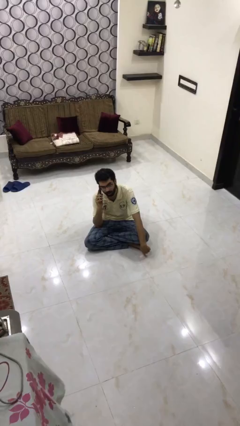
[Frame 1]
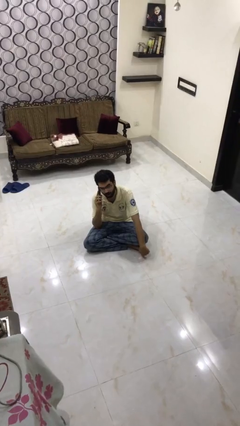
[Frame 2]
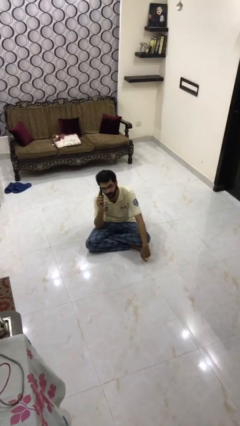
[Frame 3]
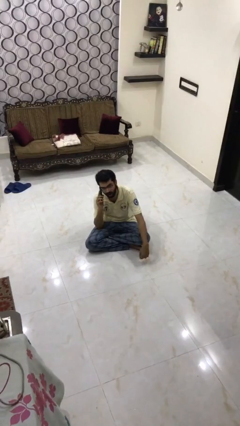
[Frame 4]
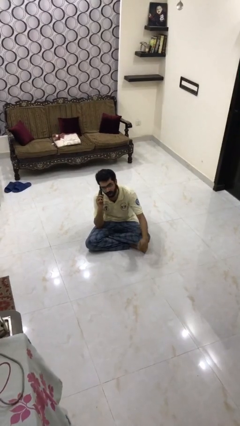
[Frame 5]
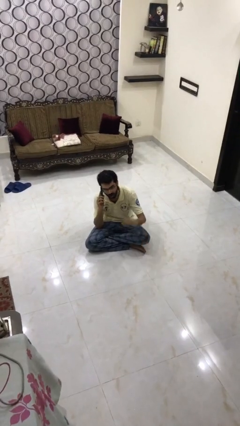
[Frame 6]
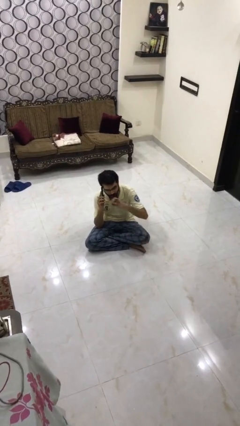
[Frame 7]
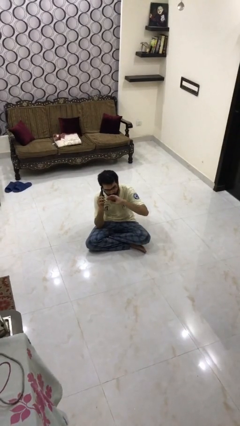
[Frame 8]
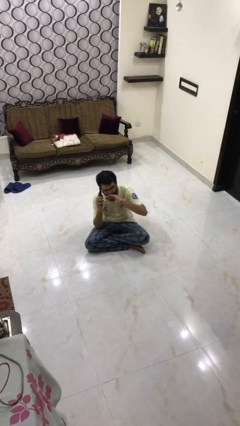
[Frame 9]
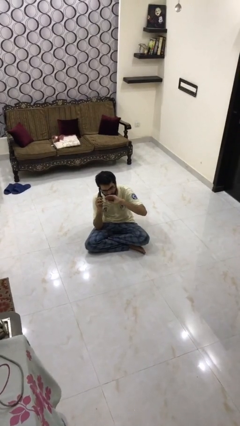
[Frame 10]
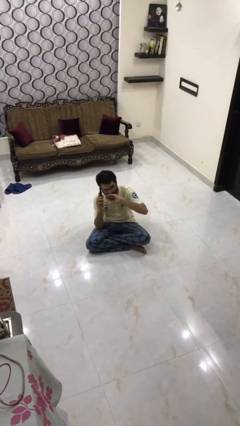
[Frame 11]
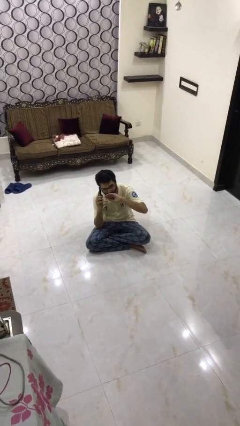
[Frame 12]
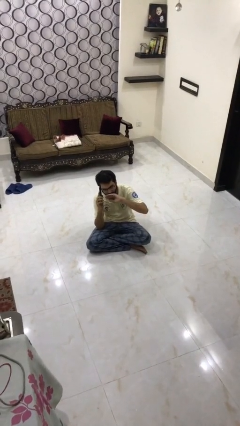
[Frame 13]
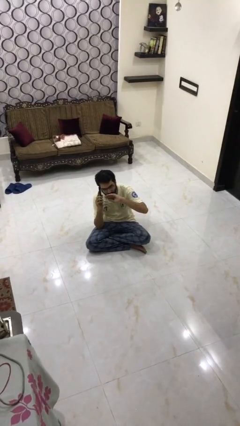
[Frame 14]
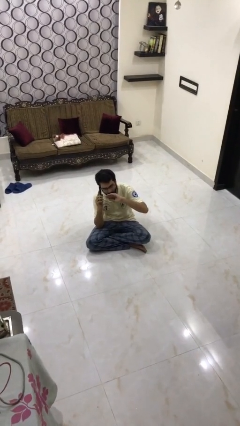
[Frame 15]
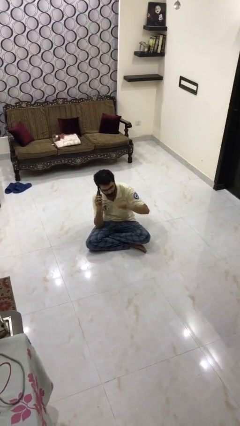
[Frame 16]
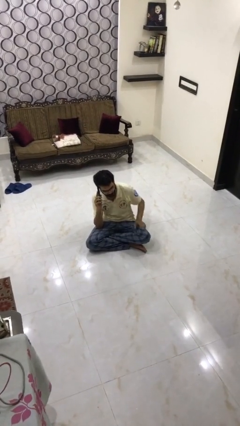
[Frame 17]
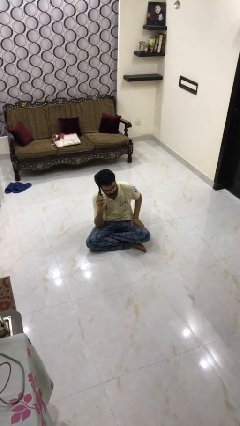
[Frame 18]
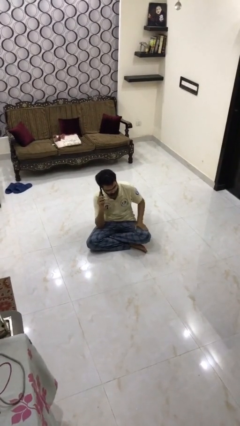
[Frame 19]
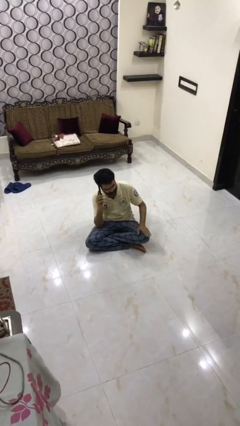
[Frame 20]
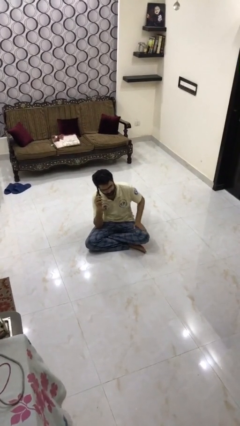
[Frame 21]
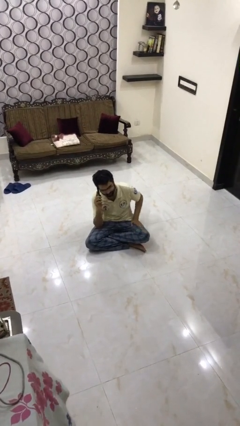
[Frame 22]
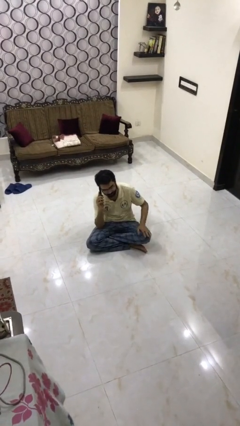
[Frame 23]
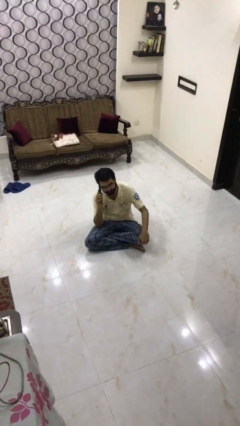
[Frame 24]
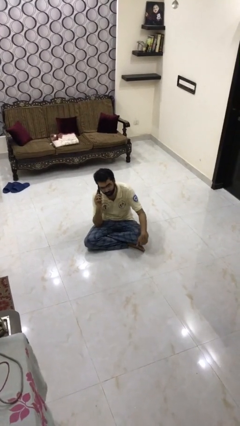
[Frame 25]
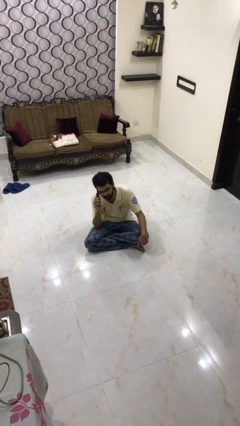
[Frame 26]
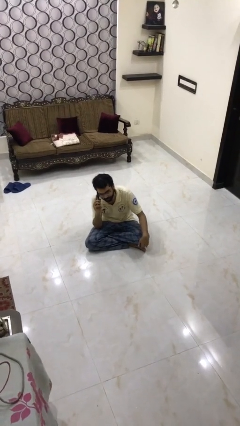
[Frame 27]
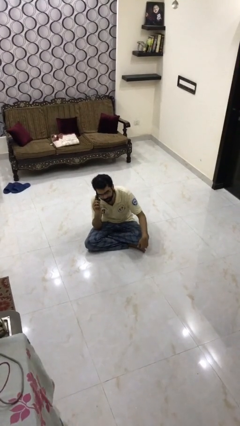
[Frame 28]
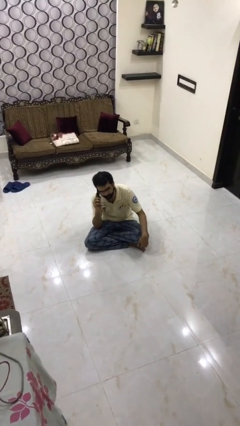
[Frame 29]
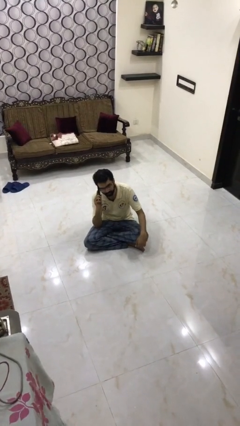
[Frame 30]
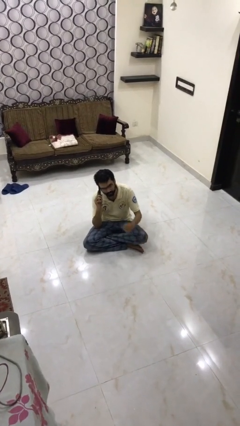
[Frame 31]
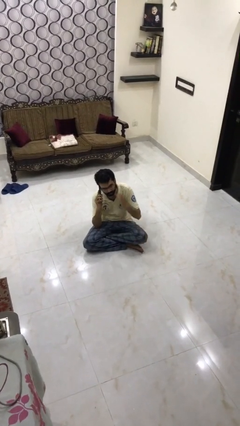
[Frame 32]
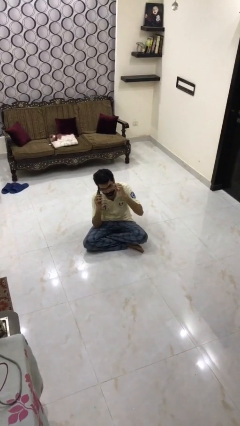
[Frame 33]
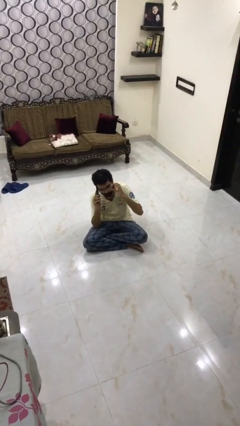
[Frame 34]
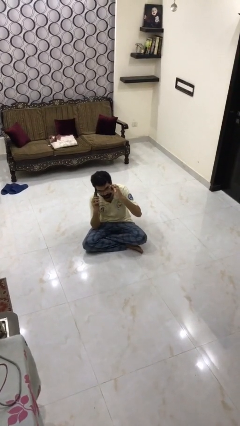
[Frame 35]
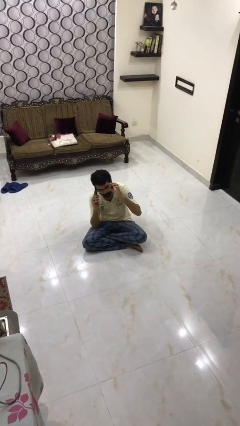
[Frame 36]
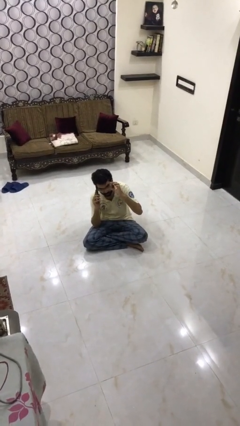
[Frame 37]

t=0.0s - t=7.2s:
person talks on phone

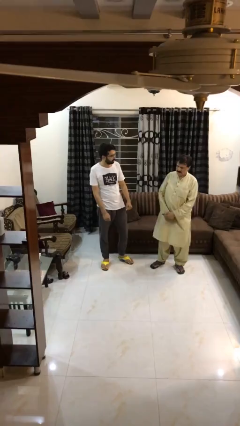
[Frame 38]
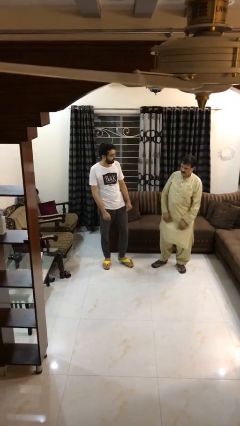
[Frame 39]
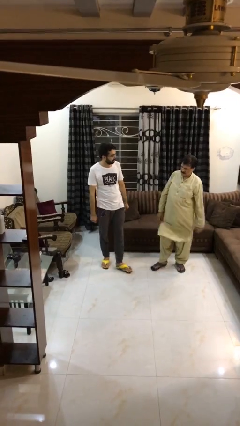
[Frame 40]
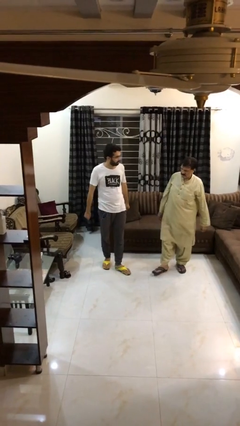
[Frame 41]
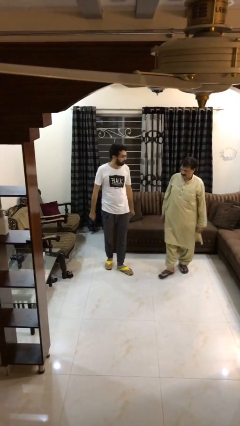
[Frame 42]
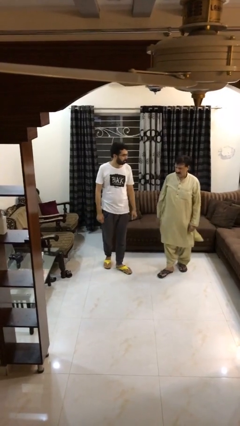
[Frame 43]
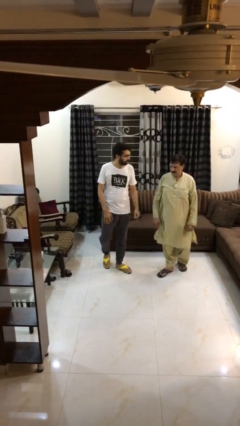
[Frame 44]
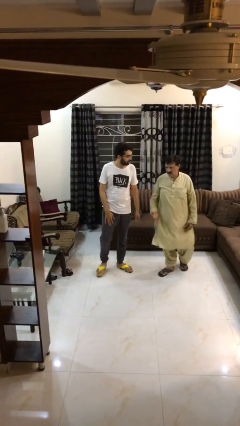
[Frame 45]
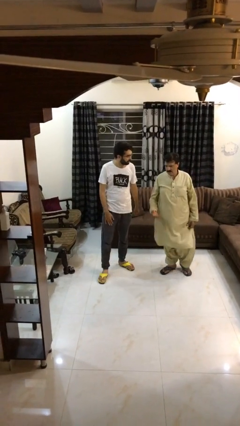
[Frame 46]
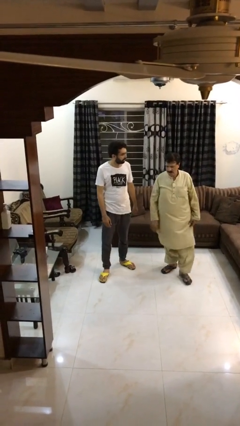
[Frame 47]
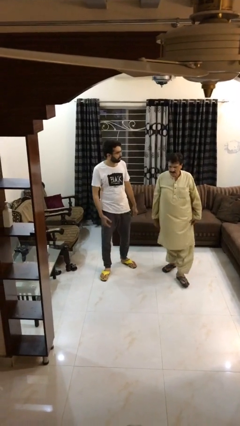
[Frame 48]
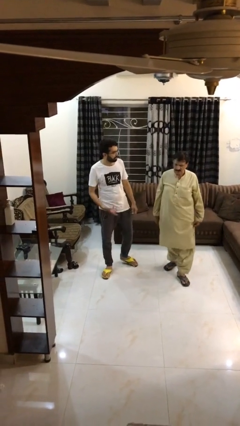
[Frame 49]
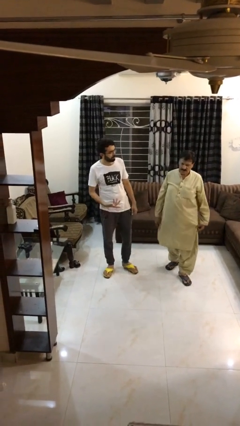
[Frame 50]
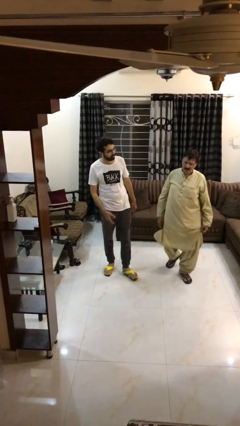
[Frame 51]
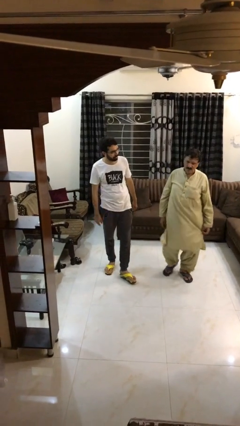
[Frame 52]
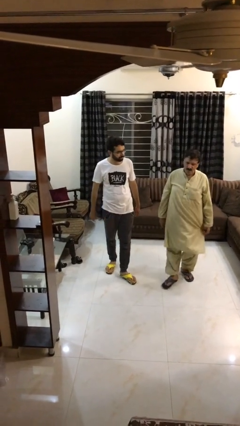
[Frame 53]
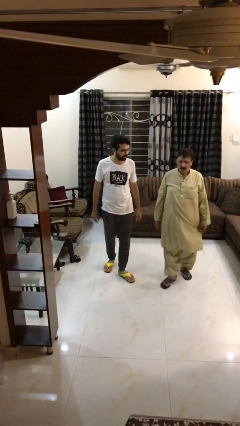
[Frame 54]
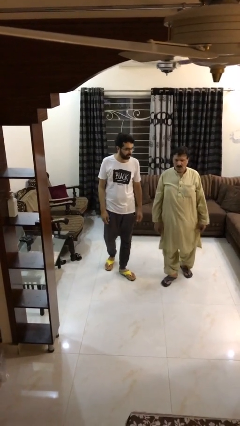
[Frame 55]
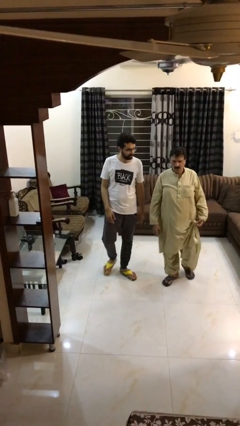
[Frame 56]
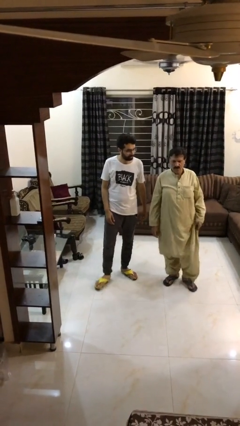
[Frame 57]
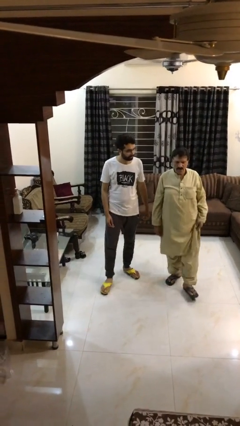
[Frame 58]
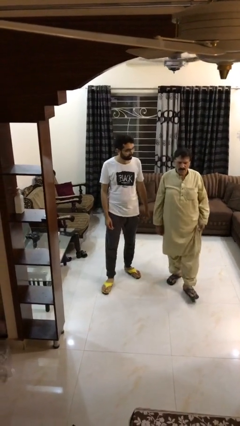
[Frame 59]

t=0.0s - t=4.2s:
person talks to person

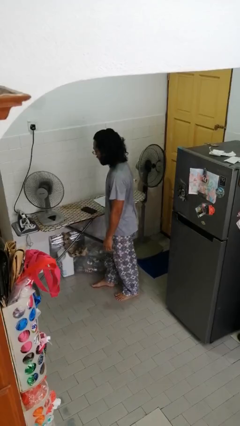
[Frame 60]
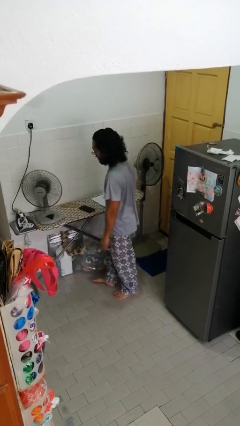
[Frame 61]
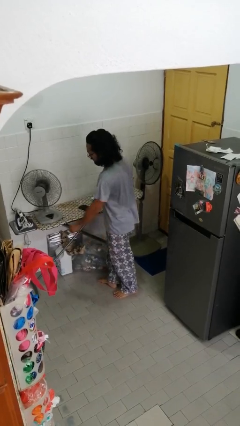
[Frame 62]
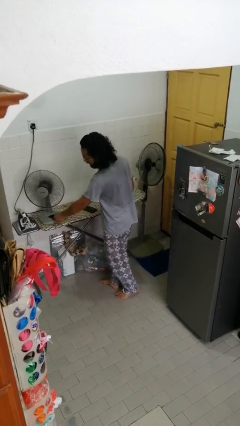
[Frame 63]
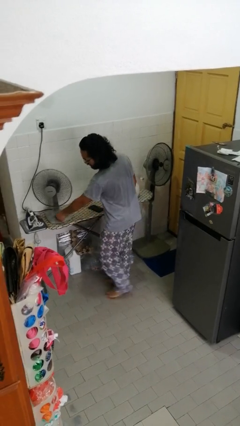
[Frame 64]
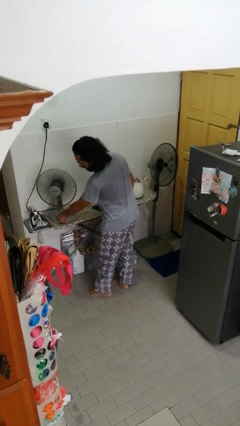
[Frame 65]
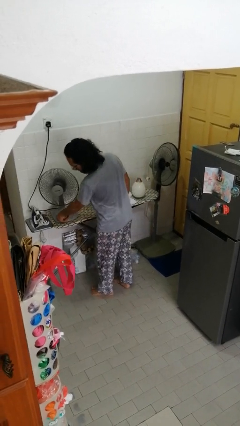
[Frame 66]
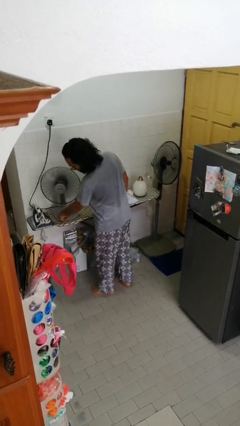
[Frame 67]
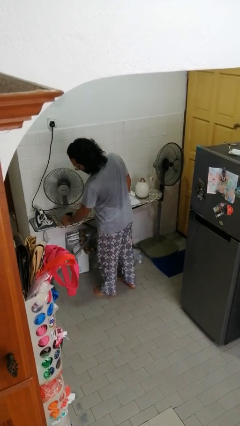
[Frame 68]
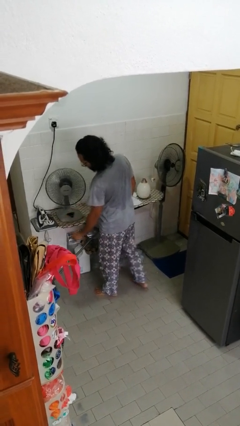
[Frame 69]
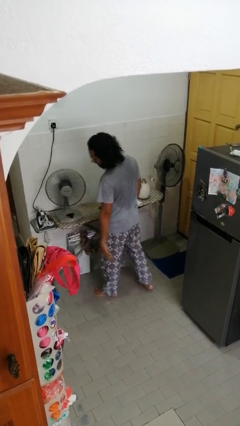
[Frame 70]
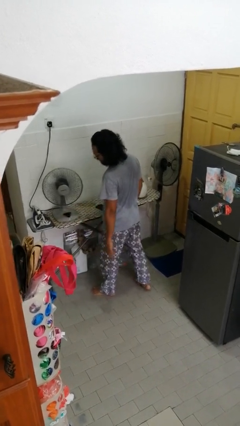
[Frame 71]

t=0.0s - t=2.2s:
person turns off fan

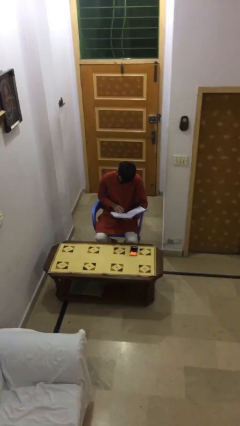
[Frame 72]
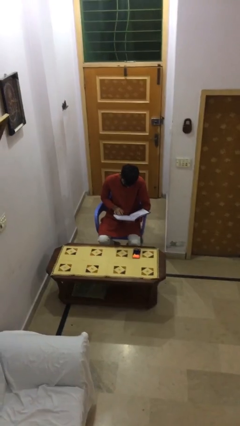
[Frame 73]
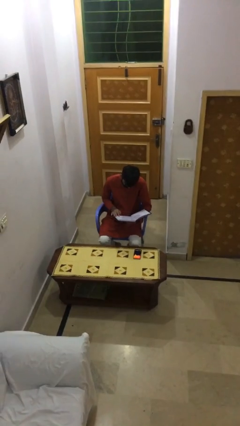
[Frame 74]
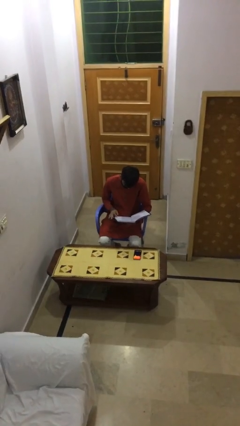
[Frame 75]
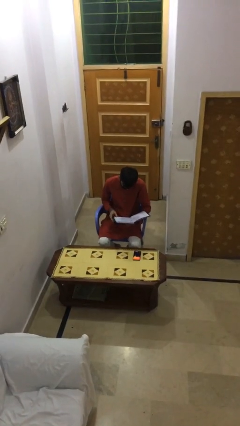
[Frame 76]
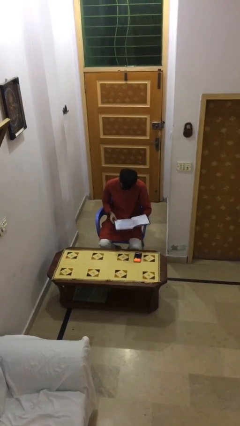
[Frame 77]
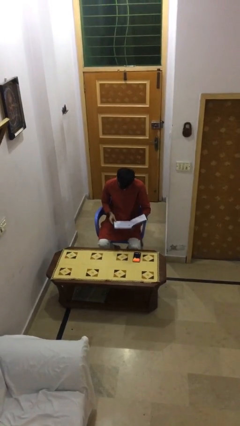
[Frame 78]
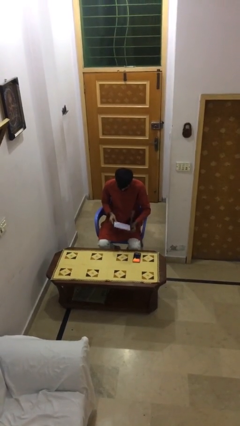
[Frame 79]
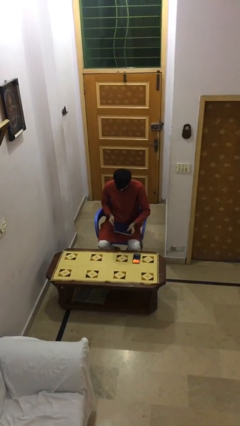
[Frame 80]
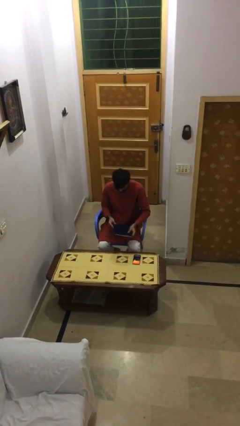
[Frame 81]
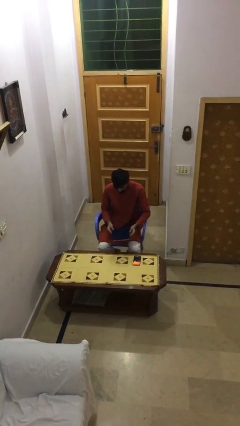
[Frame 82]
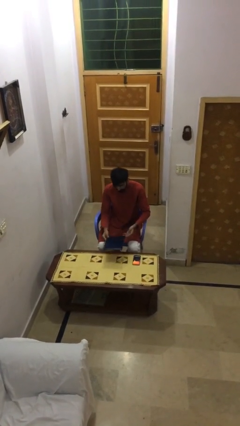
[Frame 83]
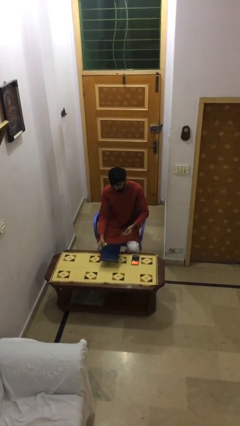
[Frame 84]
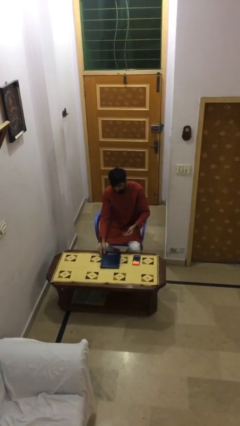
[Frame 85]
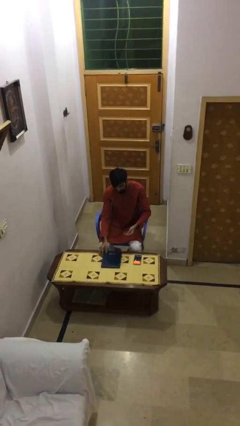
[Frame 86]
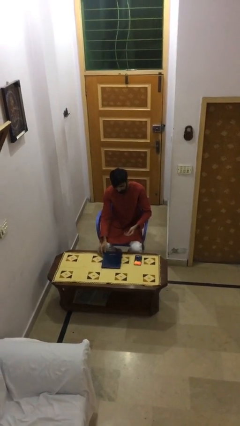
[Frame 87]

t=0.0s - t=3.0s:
person puts down object on table

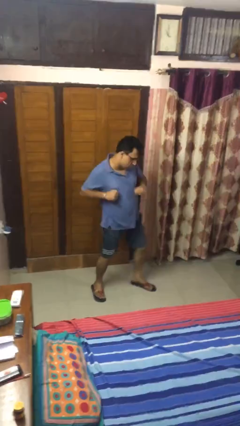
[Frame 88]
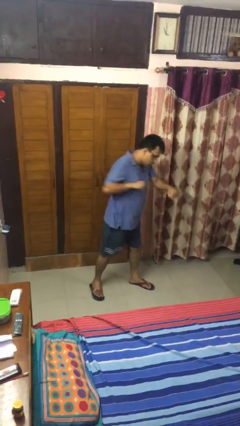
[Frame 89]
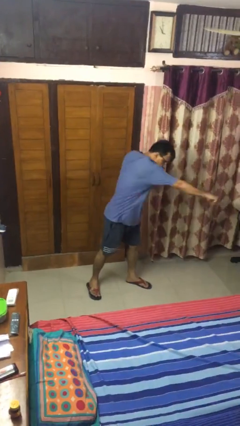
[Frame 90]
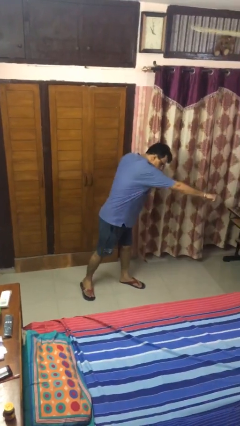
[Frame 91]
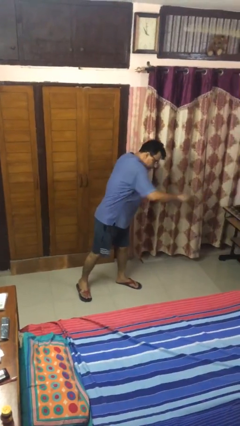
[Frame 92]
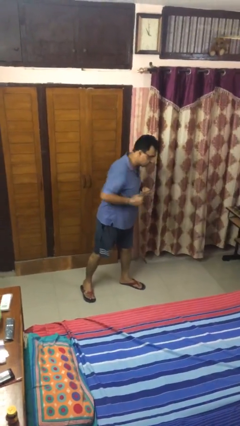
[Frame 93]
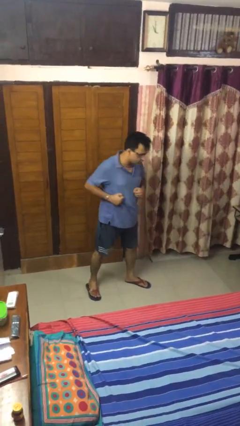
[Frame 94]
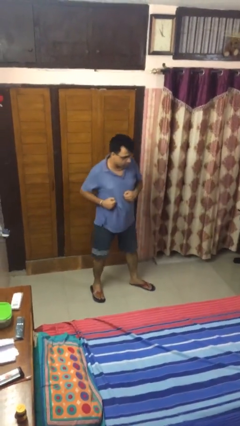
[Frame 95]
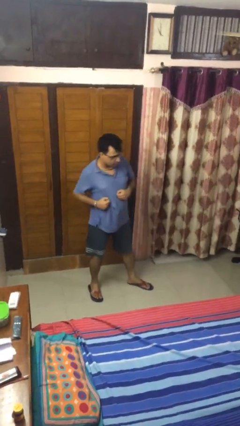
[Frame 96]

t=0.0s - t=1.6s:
person karate chop
